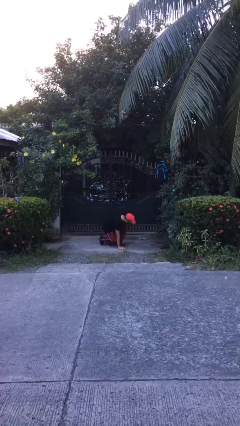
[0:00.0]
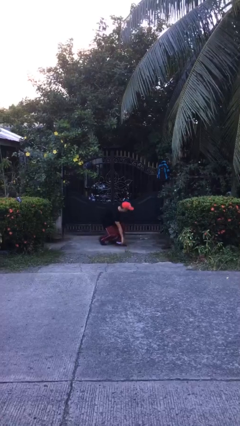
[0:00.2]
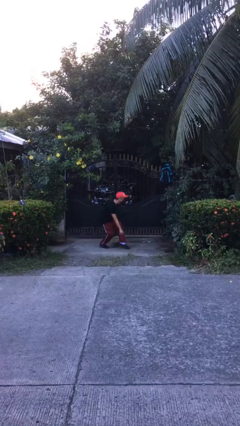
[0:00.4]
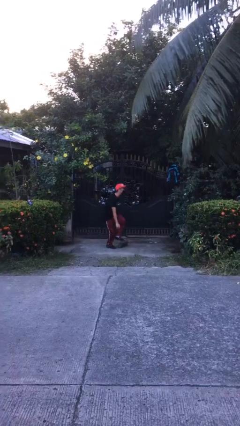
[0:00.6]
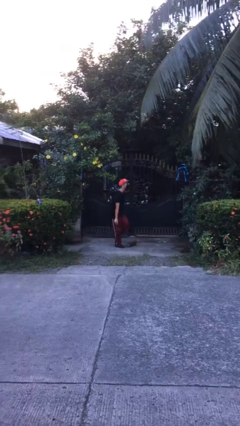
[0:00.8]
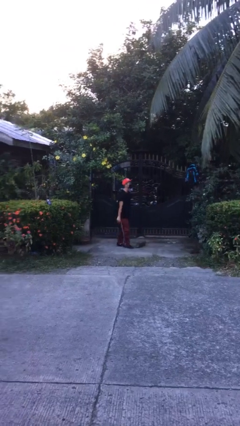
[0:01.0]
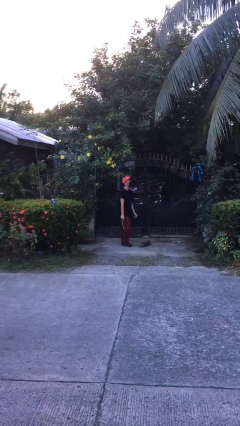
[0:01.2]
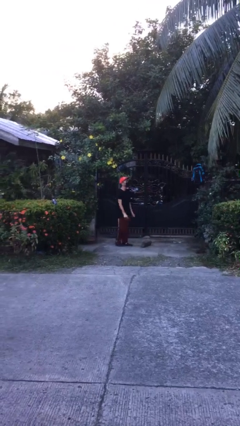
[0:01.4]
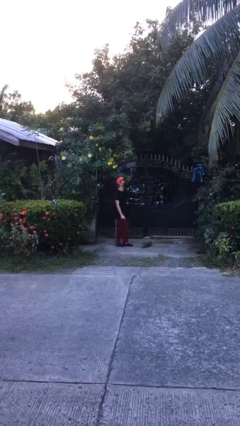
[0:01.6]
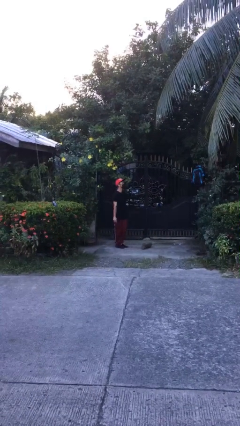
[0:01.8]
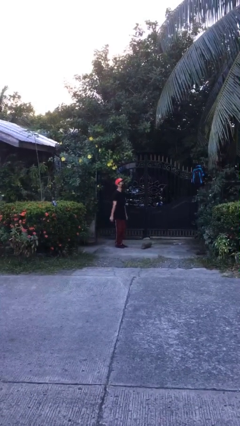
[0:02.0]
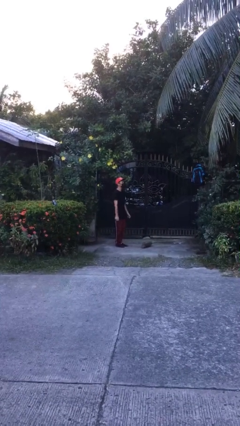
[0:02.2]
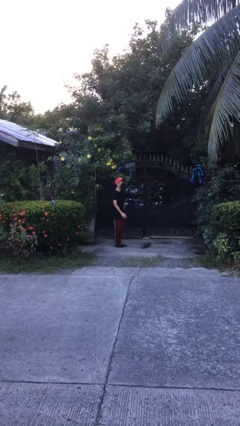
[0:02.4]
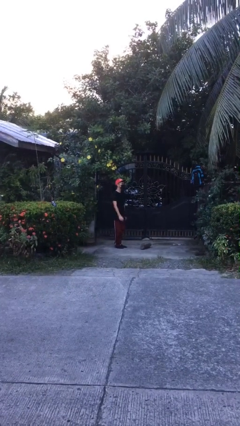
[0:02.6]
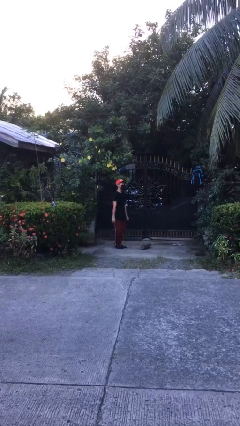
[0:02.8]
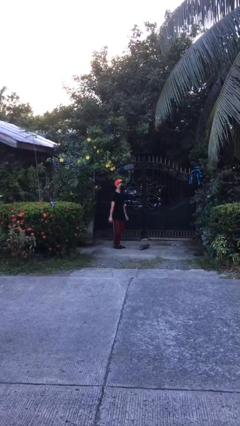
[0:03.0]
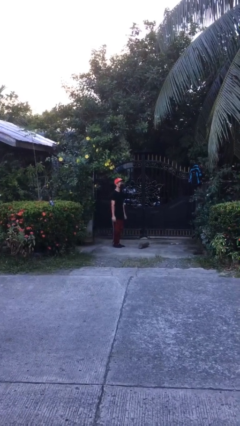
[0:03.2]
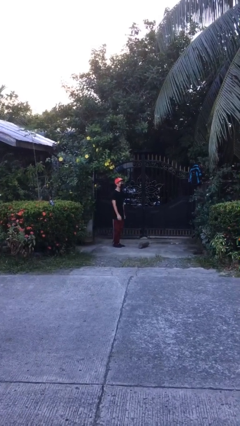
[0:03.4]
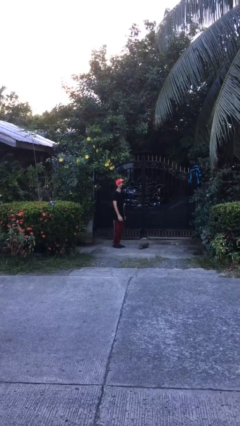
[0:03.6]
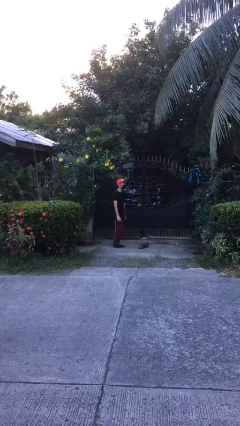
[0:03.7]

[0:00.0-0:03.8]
person stands up from floor

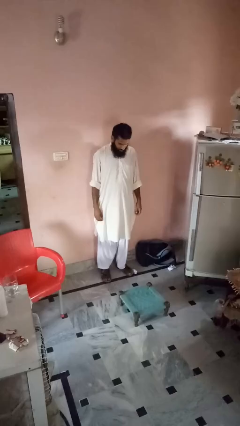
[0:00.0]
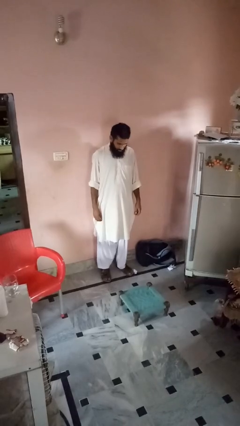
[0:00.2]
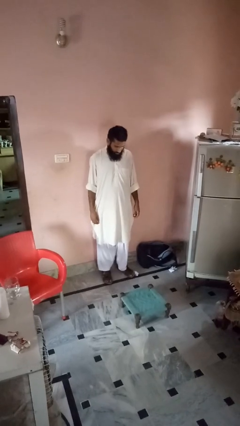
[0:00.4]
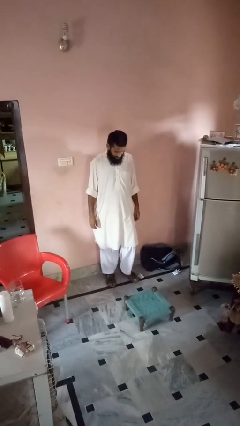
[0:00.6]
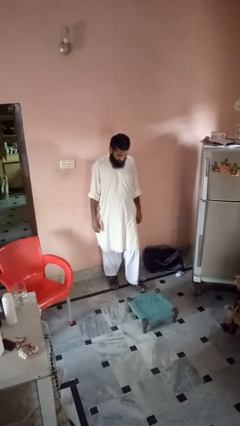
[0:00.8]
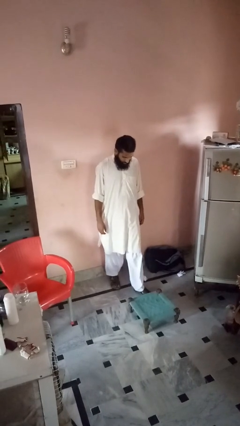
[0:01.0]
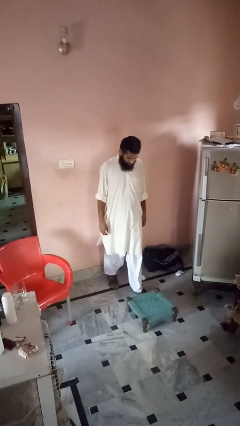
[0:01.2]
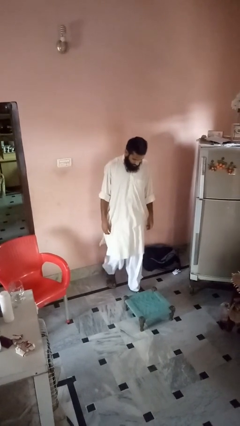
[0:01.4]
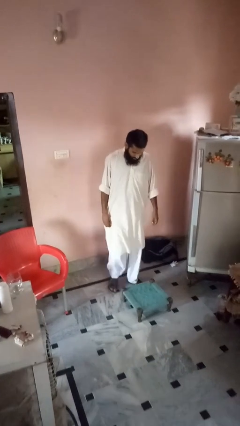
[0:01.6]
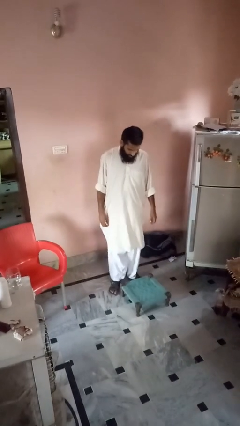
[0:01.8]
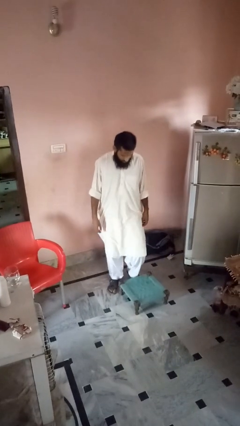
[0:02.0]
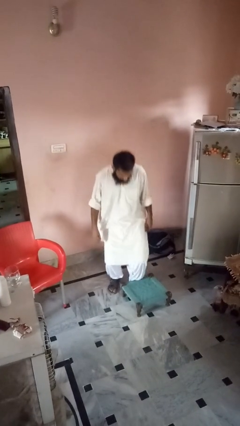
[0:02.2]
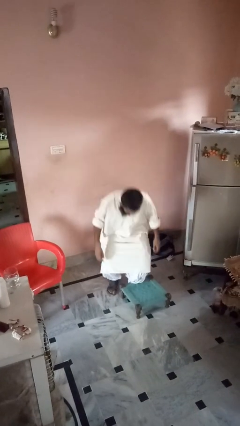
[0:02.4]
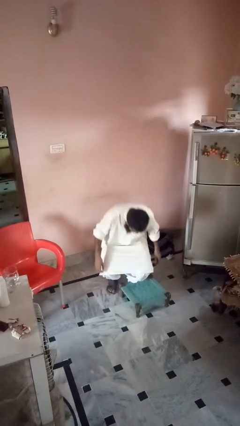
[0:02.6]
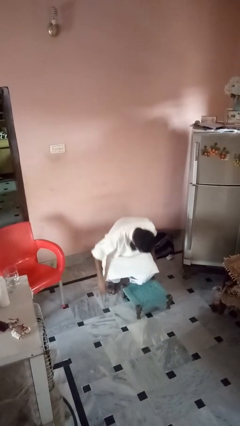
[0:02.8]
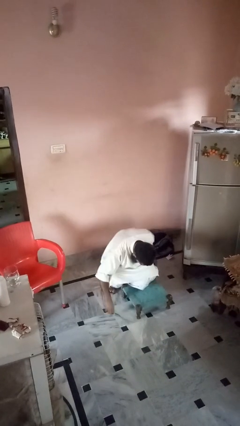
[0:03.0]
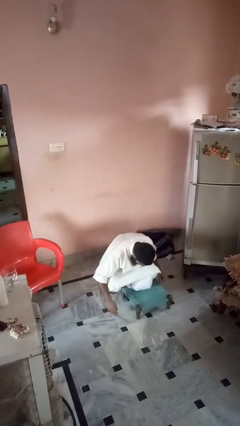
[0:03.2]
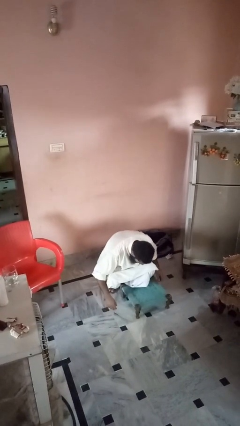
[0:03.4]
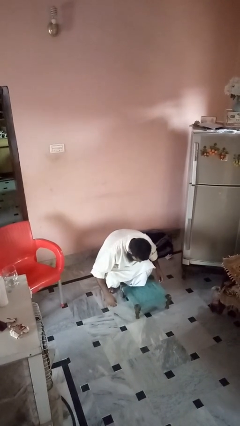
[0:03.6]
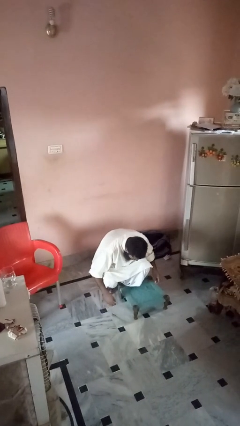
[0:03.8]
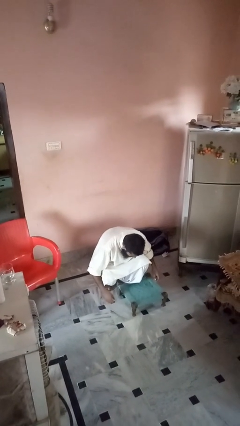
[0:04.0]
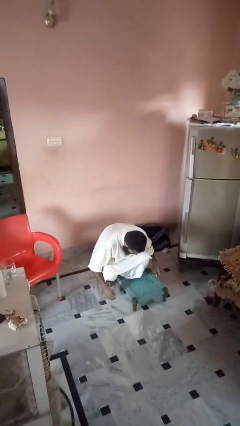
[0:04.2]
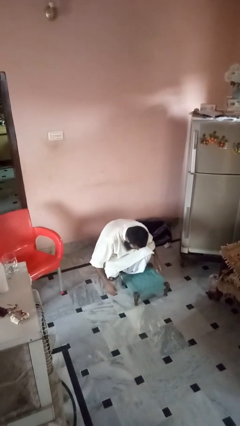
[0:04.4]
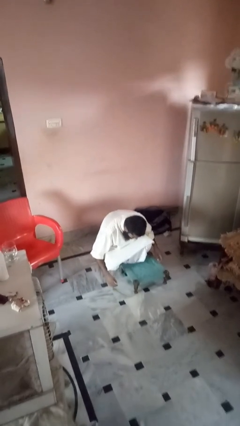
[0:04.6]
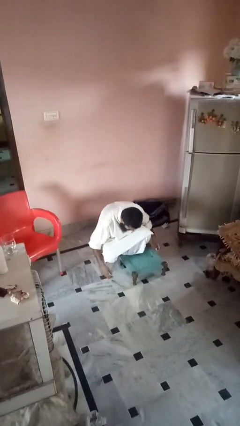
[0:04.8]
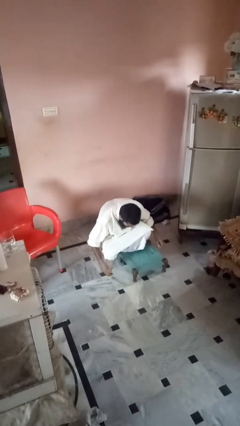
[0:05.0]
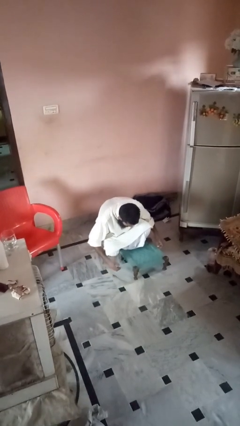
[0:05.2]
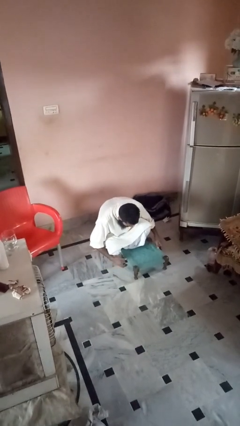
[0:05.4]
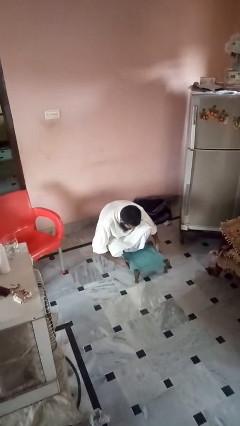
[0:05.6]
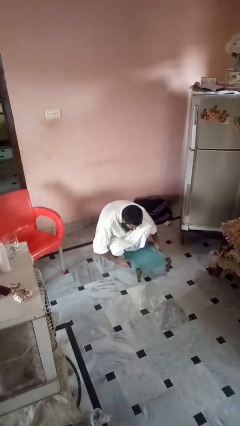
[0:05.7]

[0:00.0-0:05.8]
person knocks over furniture

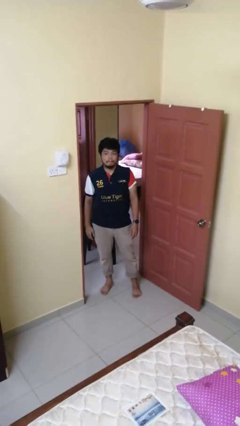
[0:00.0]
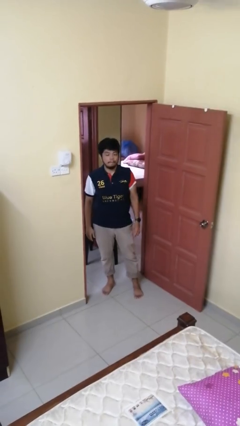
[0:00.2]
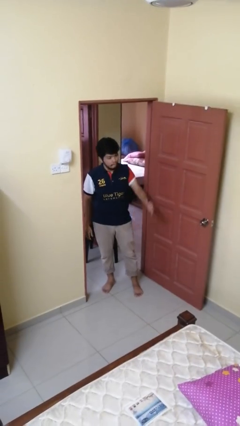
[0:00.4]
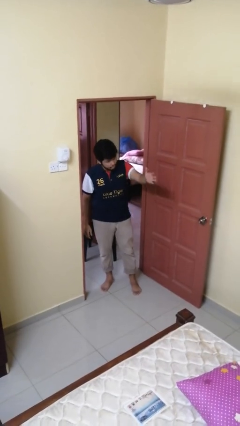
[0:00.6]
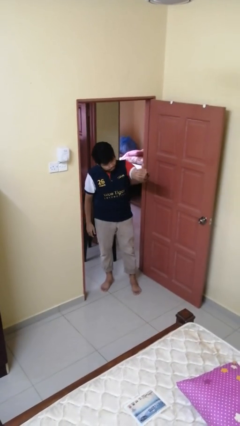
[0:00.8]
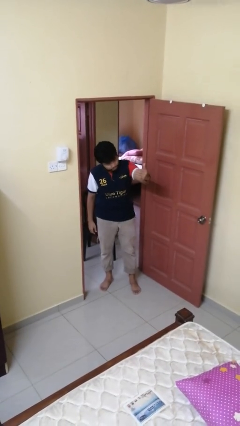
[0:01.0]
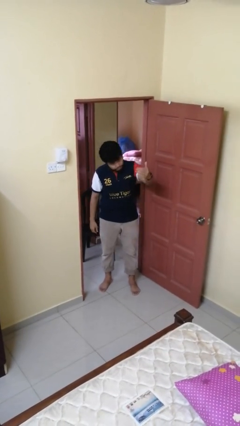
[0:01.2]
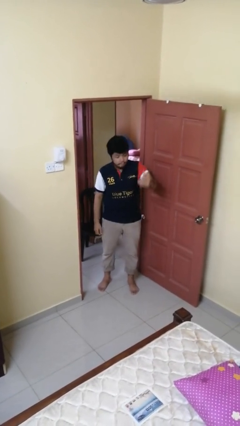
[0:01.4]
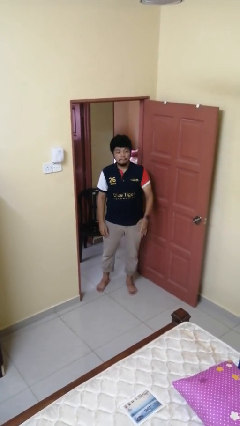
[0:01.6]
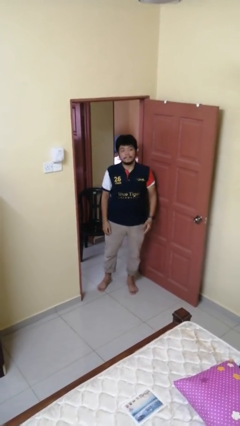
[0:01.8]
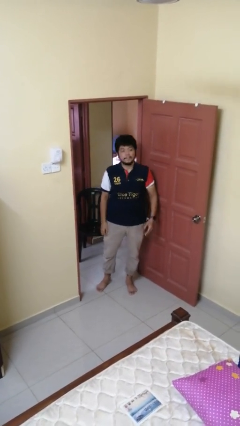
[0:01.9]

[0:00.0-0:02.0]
person gestures come here

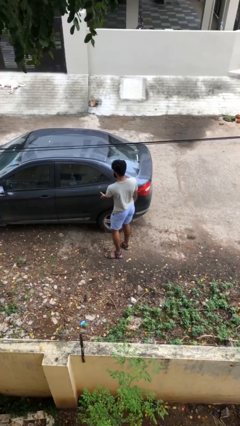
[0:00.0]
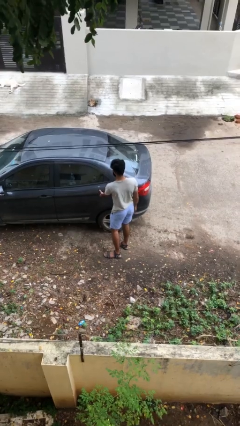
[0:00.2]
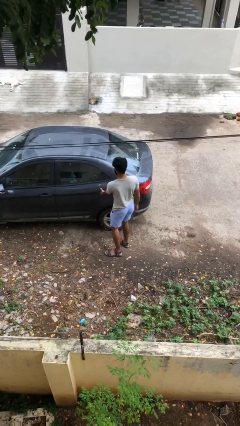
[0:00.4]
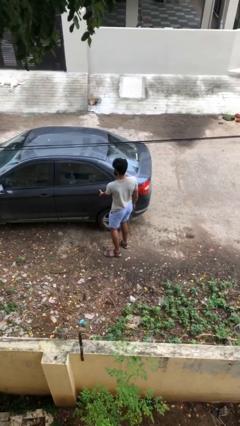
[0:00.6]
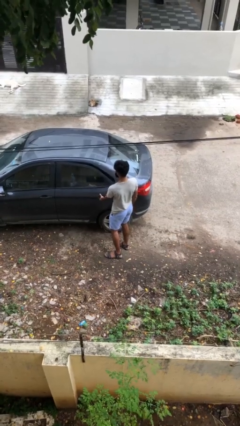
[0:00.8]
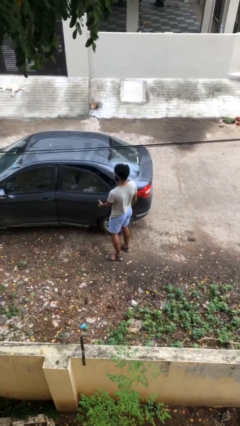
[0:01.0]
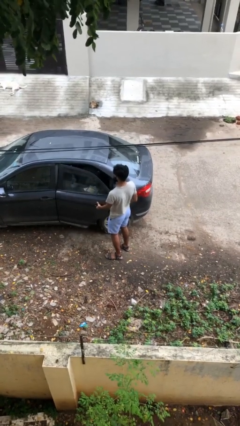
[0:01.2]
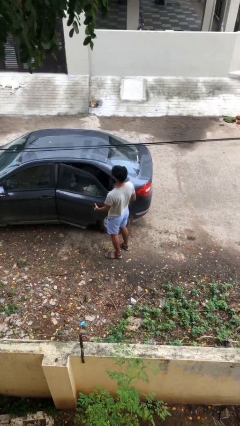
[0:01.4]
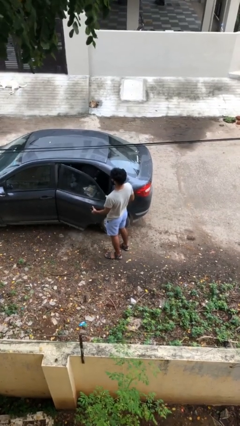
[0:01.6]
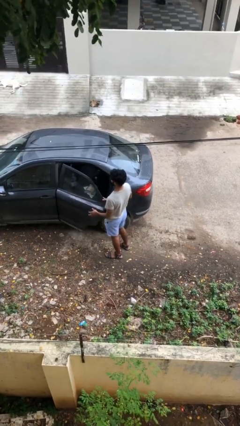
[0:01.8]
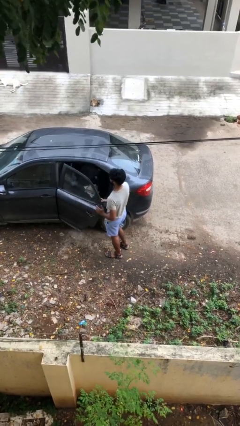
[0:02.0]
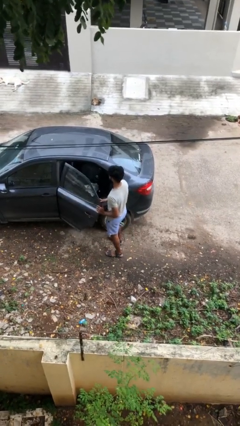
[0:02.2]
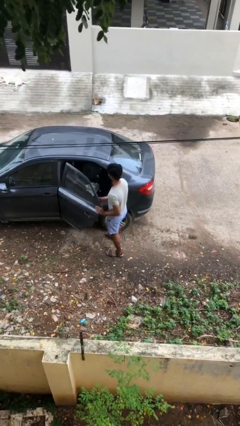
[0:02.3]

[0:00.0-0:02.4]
person opens car door

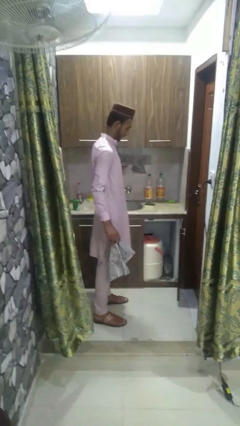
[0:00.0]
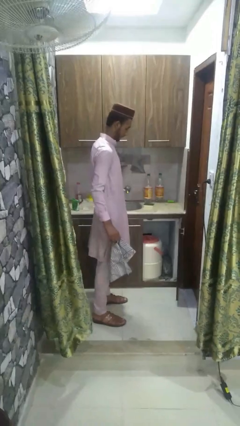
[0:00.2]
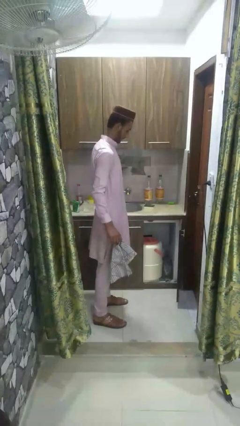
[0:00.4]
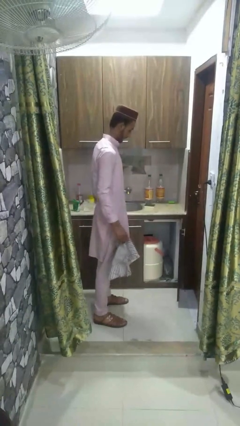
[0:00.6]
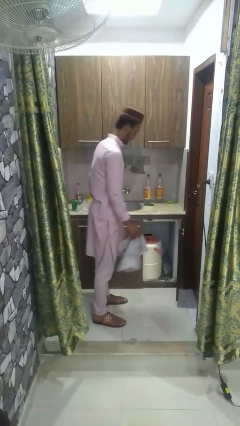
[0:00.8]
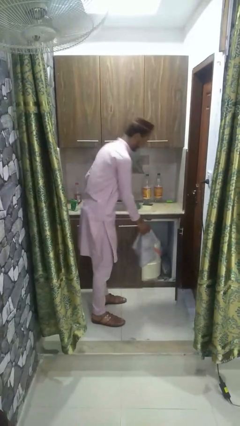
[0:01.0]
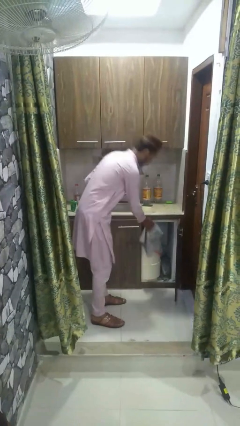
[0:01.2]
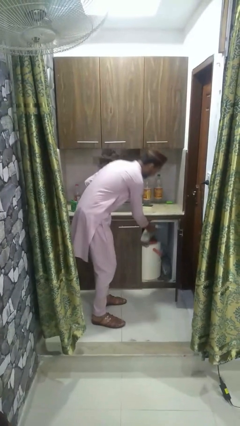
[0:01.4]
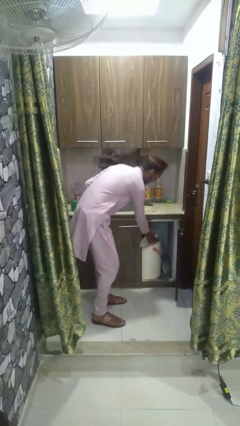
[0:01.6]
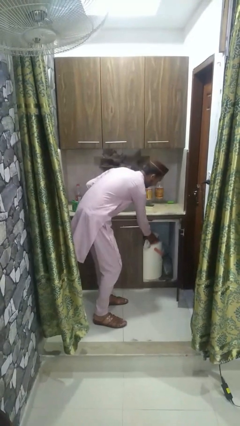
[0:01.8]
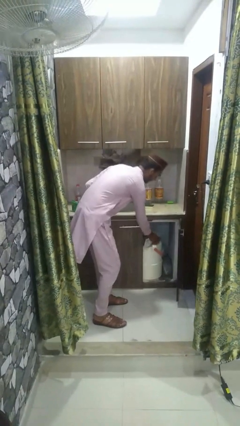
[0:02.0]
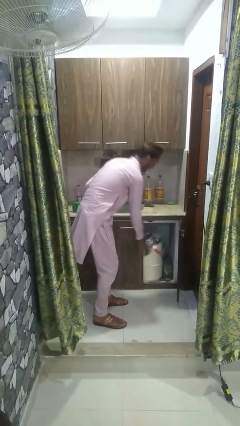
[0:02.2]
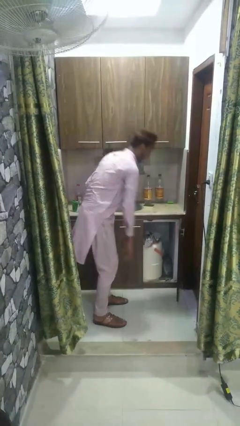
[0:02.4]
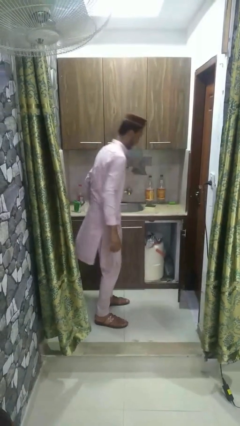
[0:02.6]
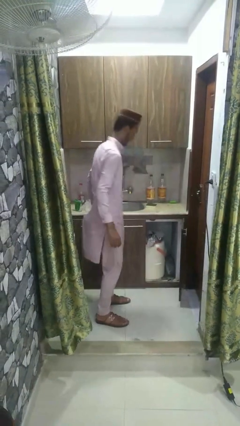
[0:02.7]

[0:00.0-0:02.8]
person loads clotheswasher

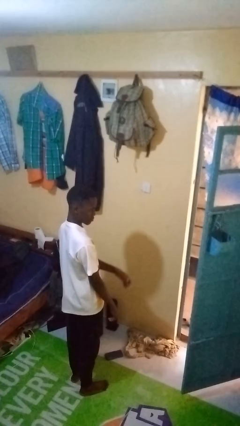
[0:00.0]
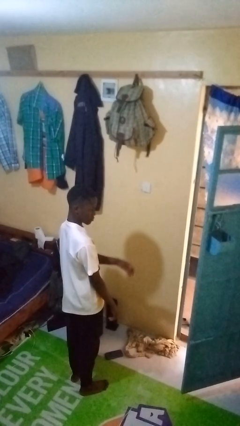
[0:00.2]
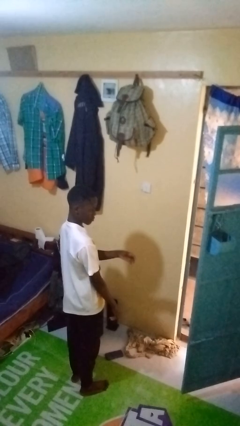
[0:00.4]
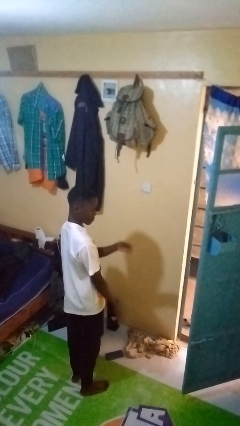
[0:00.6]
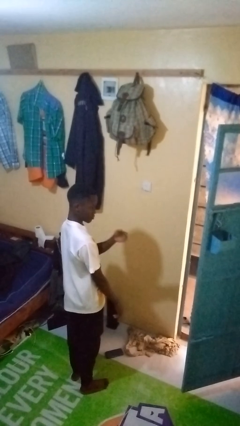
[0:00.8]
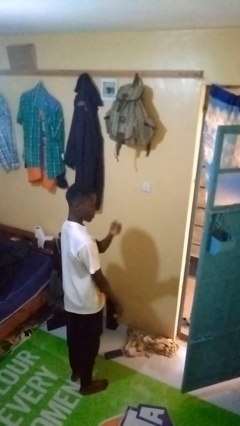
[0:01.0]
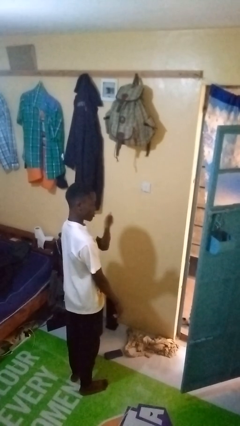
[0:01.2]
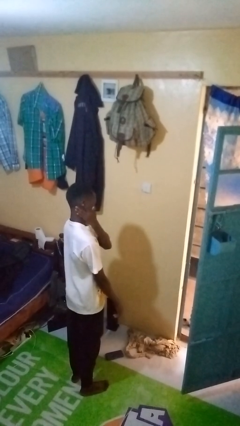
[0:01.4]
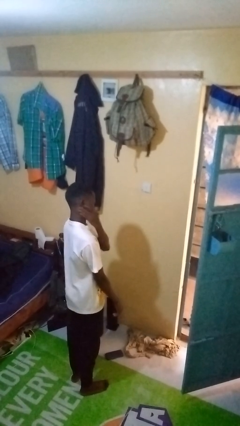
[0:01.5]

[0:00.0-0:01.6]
person swats bug
